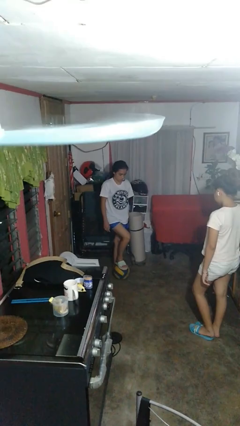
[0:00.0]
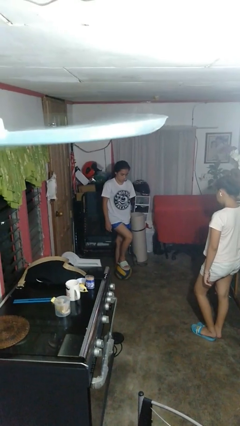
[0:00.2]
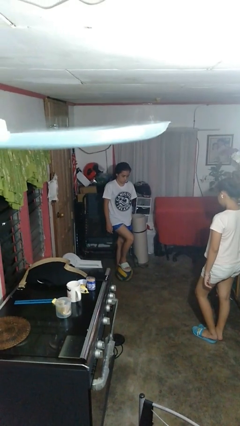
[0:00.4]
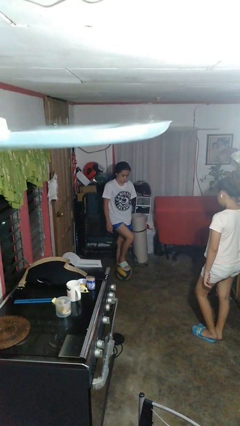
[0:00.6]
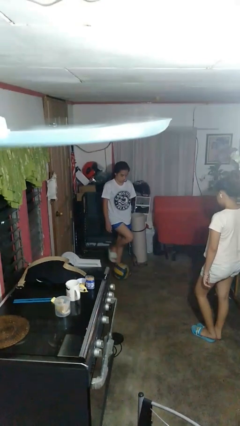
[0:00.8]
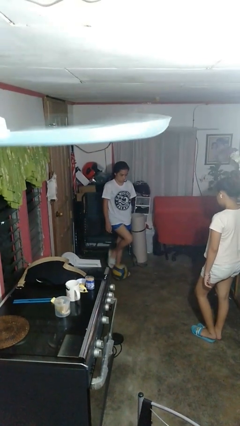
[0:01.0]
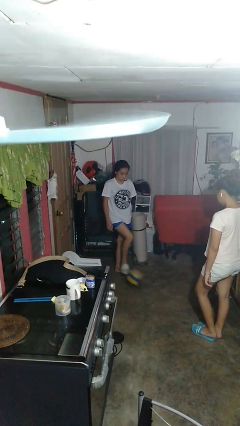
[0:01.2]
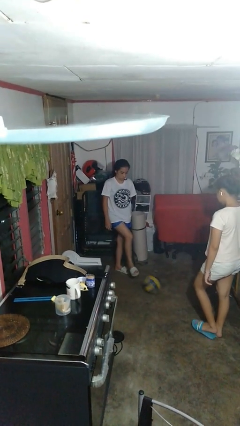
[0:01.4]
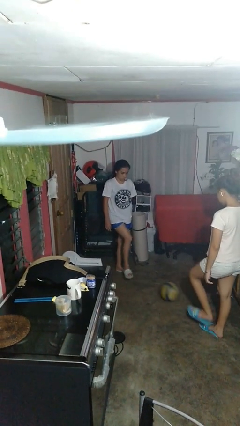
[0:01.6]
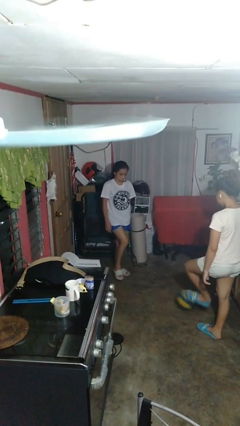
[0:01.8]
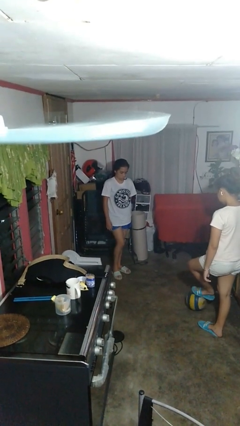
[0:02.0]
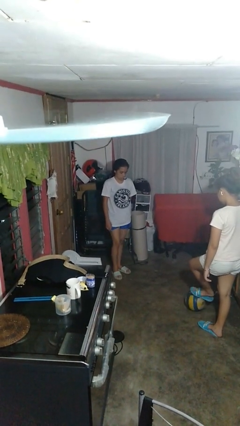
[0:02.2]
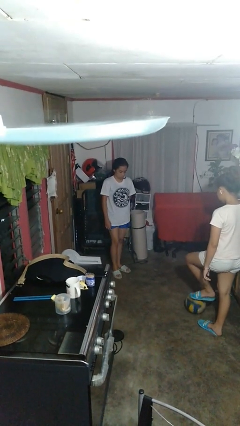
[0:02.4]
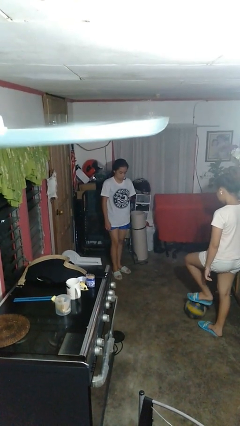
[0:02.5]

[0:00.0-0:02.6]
person kicks object to person

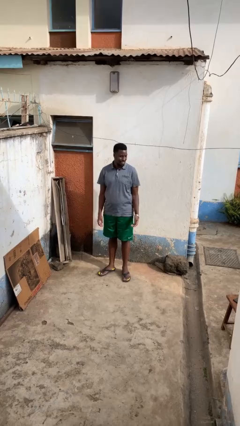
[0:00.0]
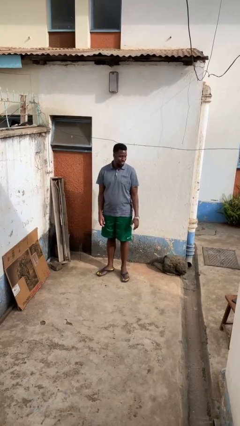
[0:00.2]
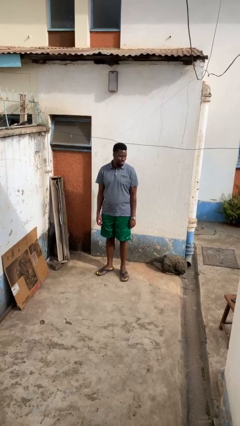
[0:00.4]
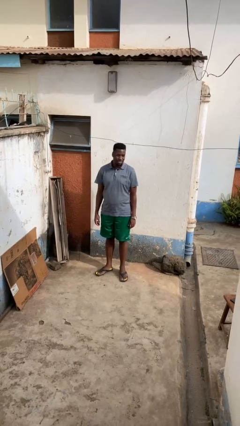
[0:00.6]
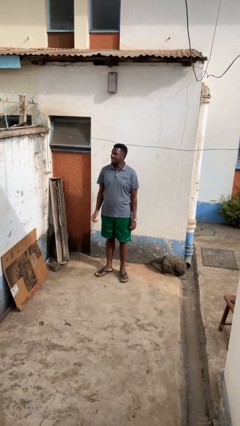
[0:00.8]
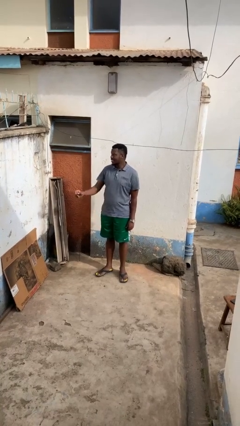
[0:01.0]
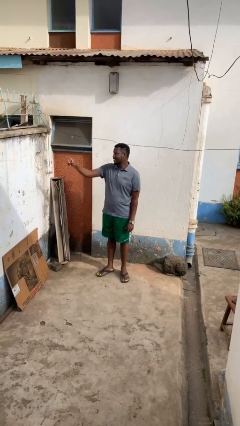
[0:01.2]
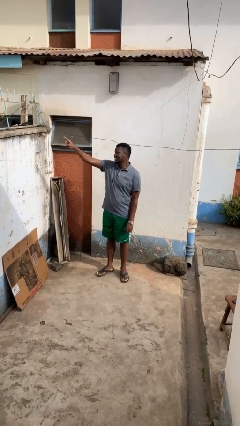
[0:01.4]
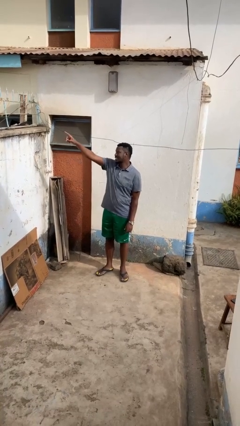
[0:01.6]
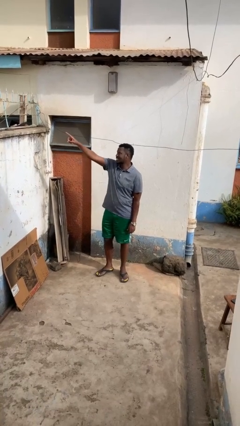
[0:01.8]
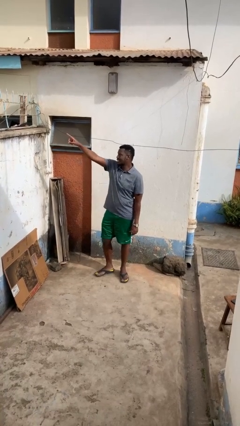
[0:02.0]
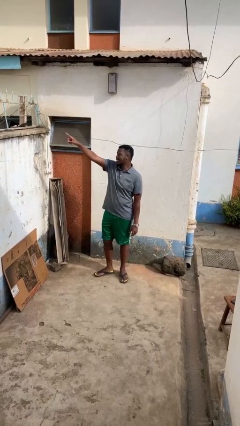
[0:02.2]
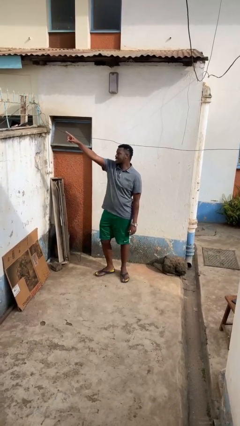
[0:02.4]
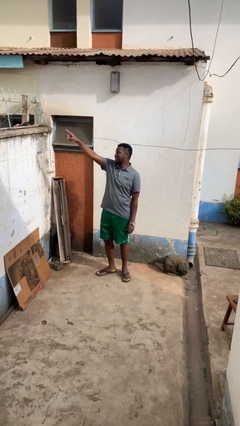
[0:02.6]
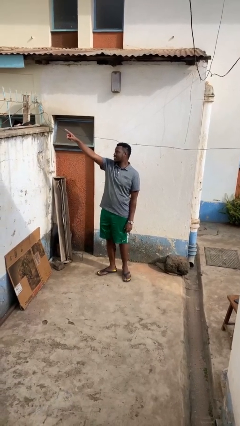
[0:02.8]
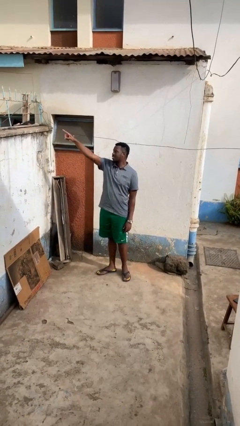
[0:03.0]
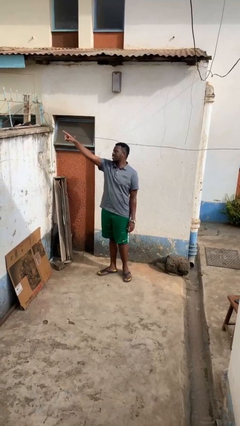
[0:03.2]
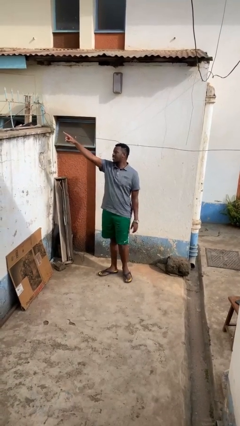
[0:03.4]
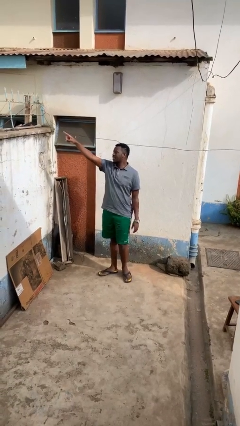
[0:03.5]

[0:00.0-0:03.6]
person points at person

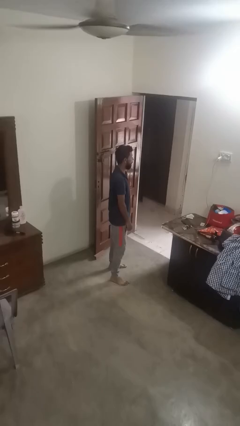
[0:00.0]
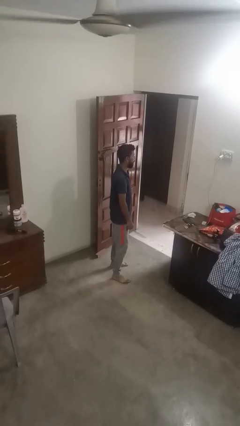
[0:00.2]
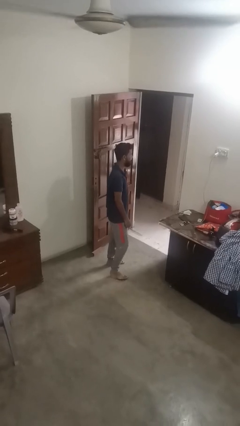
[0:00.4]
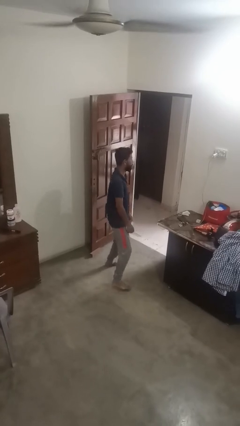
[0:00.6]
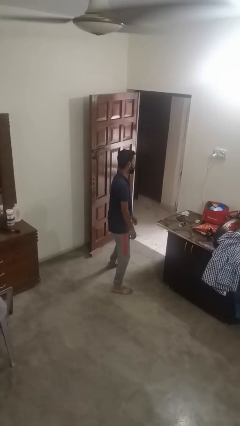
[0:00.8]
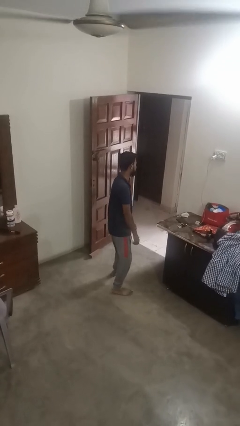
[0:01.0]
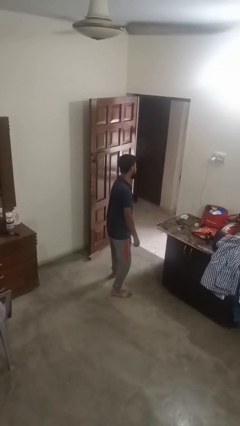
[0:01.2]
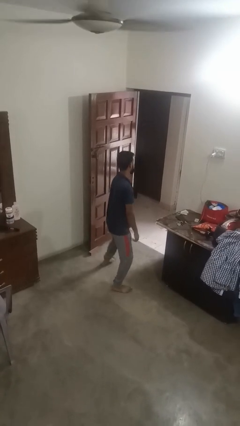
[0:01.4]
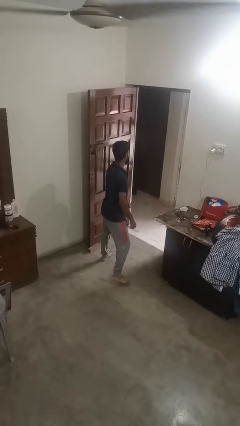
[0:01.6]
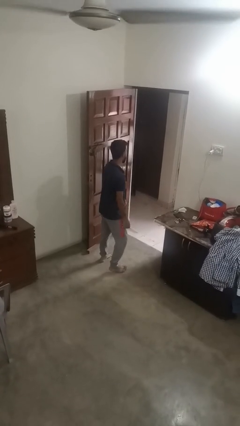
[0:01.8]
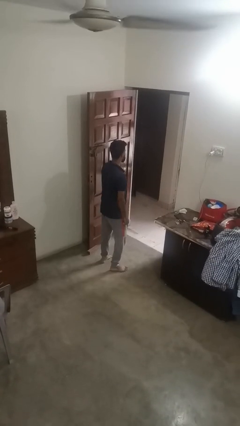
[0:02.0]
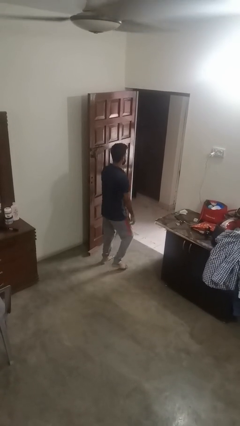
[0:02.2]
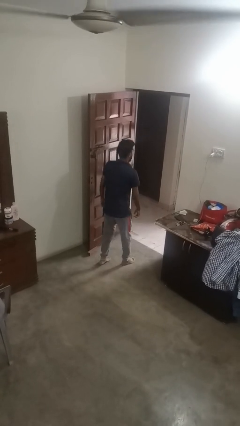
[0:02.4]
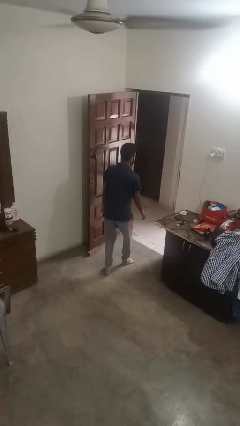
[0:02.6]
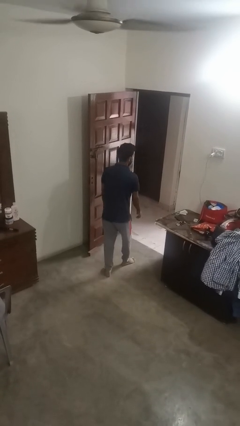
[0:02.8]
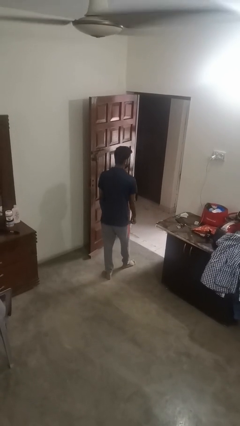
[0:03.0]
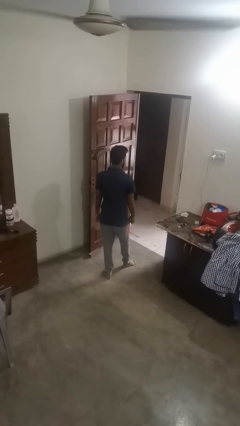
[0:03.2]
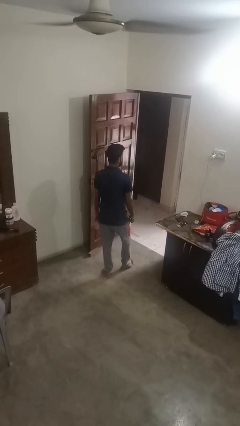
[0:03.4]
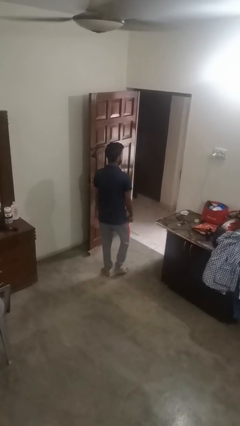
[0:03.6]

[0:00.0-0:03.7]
person dances in place

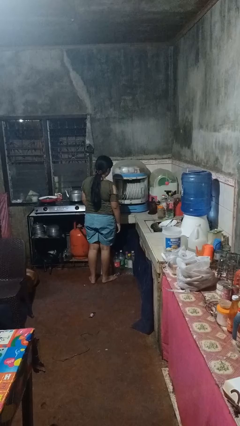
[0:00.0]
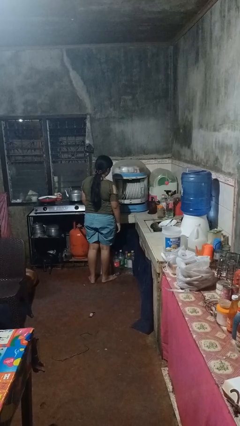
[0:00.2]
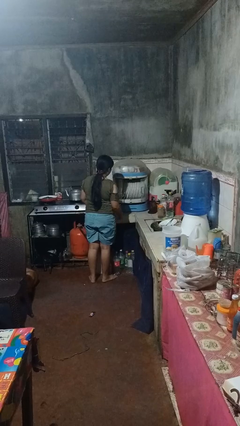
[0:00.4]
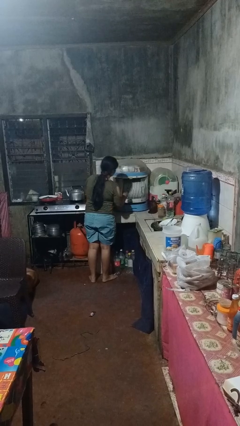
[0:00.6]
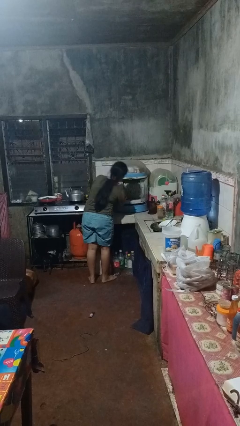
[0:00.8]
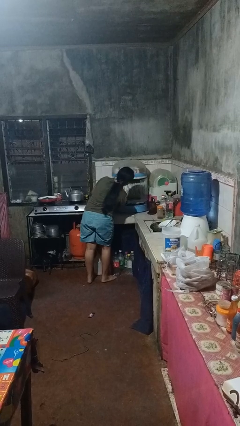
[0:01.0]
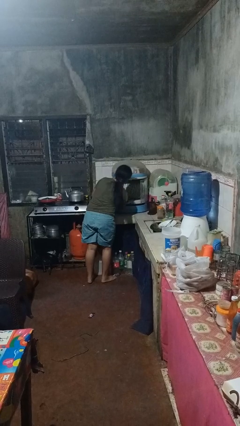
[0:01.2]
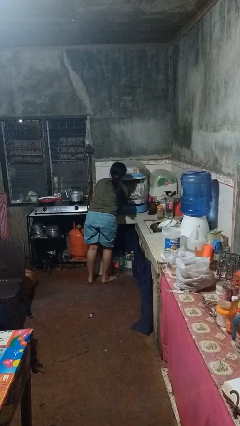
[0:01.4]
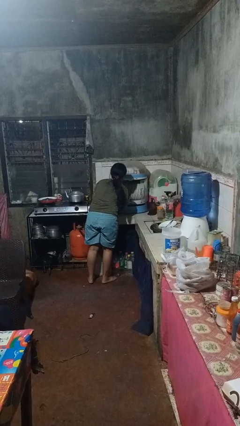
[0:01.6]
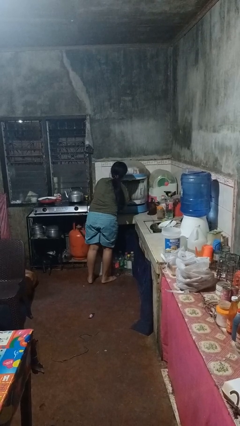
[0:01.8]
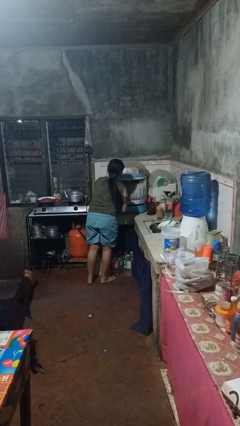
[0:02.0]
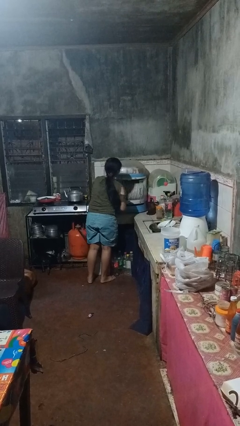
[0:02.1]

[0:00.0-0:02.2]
person searches in kitchen drawer

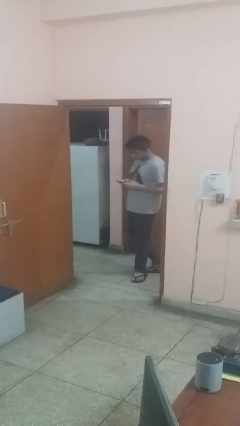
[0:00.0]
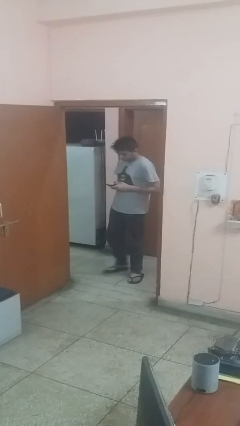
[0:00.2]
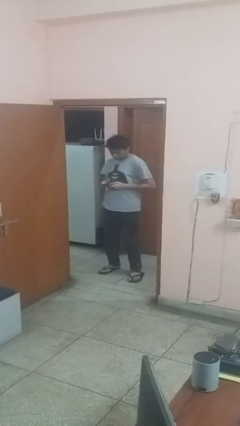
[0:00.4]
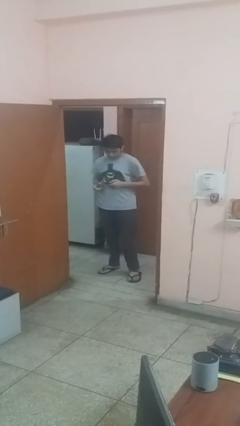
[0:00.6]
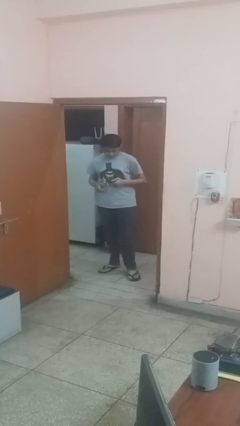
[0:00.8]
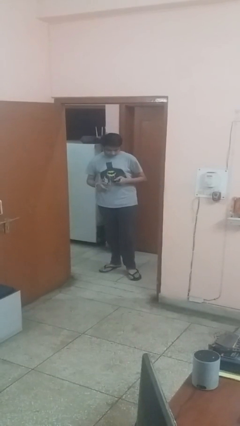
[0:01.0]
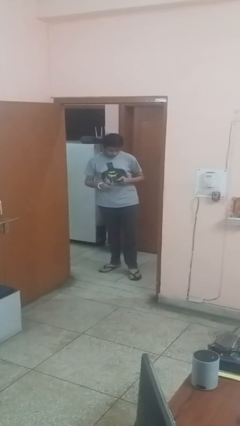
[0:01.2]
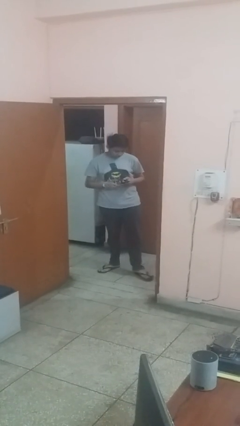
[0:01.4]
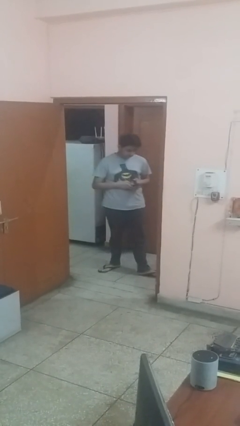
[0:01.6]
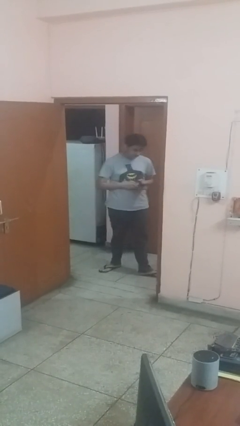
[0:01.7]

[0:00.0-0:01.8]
person enters scene through structure

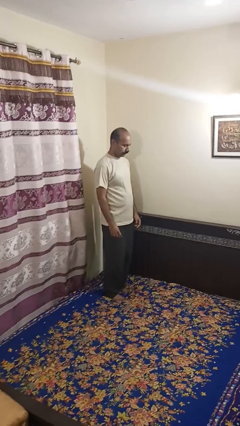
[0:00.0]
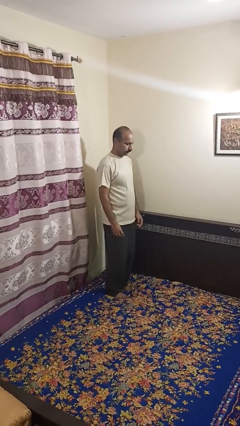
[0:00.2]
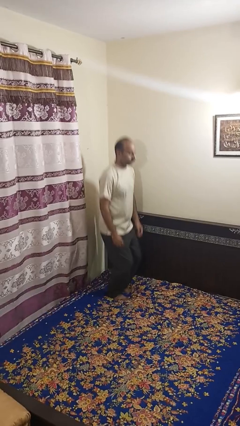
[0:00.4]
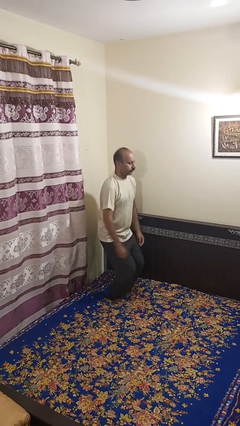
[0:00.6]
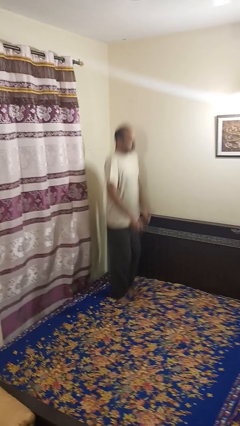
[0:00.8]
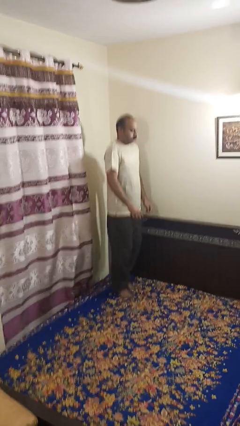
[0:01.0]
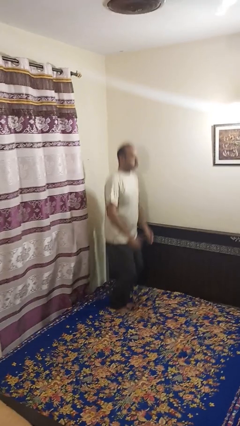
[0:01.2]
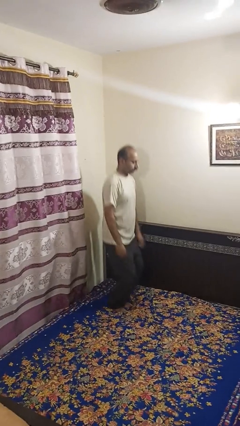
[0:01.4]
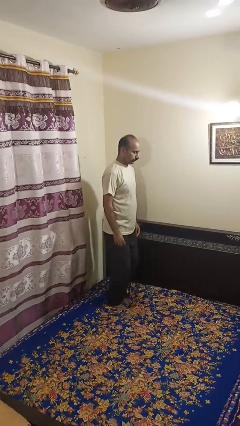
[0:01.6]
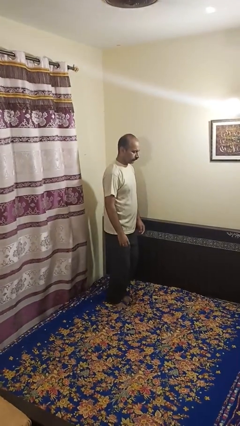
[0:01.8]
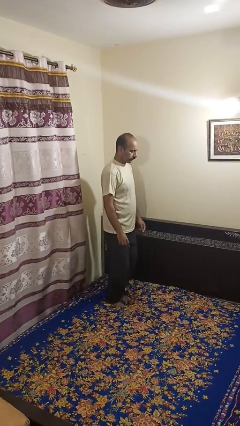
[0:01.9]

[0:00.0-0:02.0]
person jumps on bed

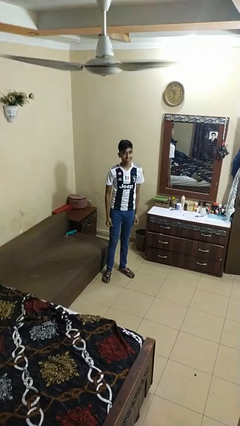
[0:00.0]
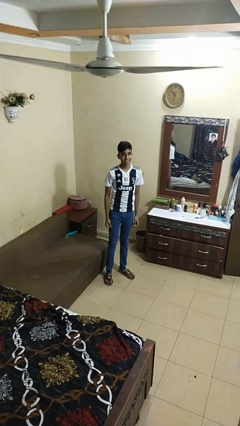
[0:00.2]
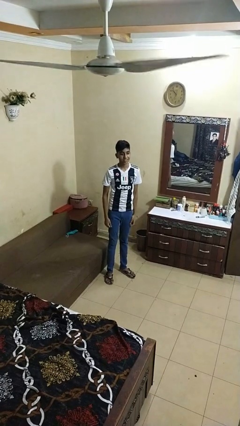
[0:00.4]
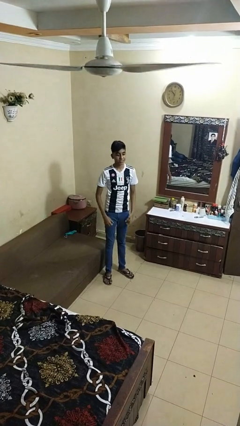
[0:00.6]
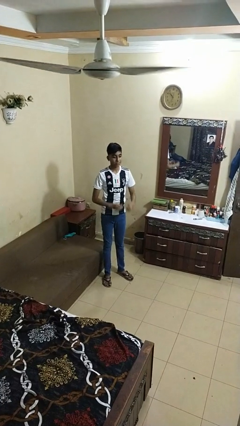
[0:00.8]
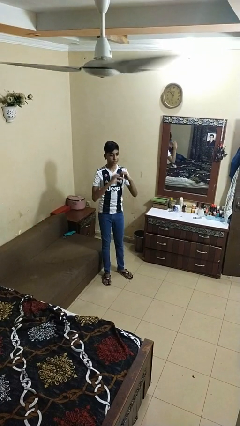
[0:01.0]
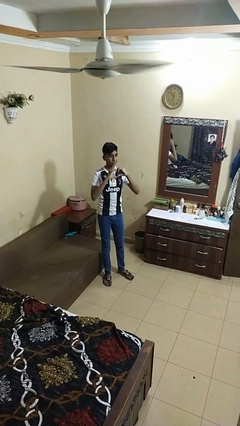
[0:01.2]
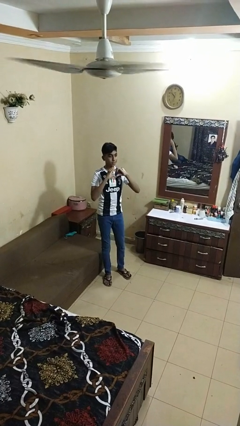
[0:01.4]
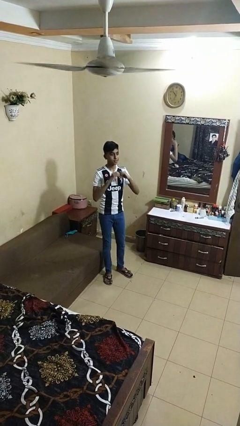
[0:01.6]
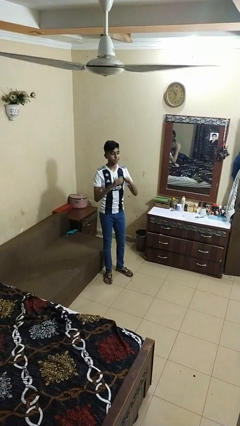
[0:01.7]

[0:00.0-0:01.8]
person gestures heart
